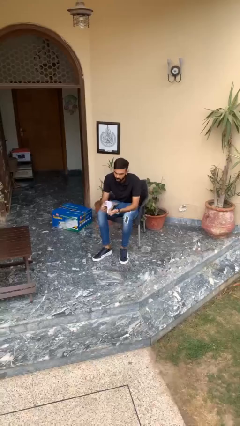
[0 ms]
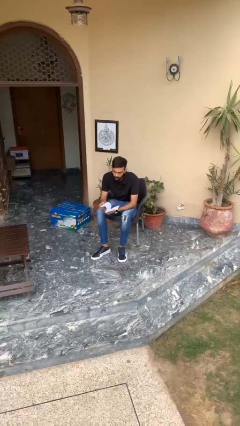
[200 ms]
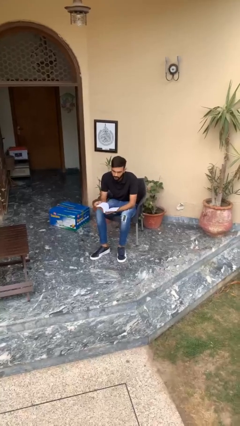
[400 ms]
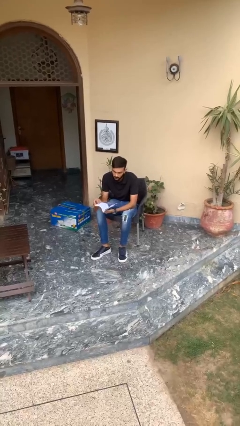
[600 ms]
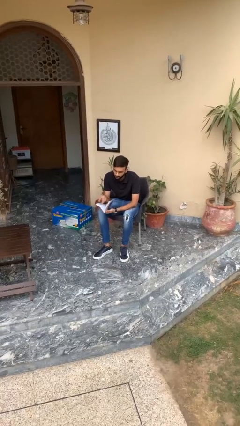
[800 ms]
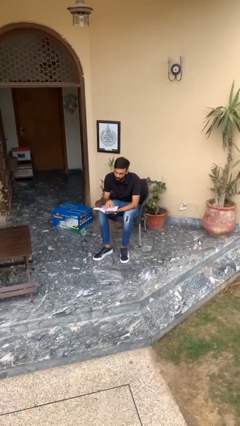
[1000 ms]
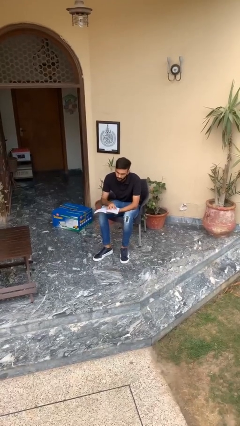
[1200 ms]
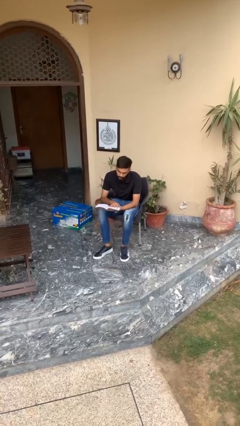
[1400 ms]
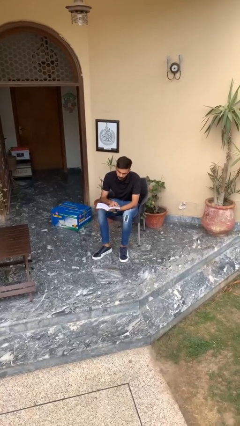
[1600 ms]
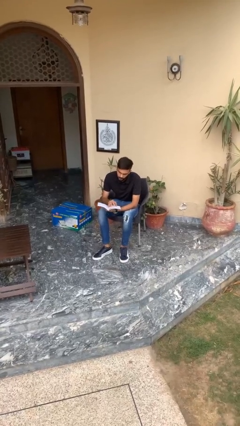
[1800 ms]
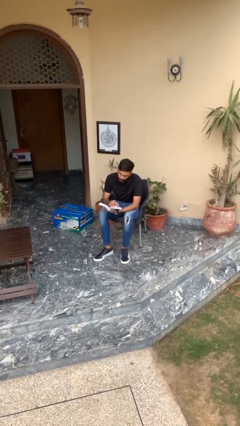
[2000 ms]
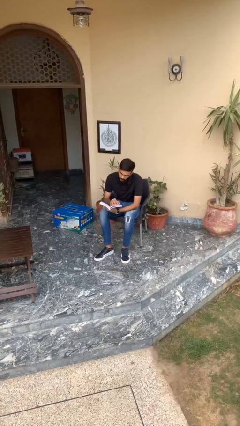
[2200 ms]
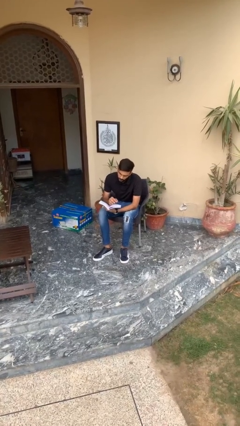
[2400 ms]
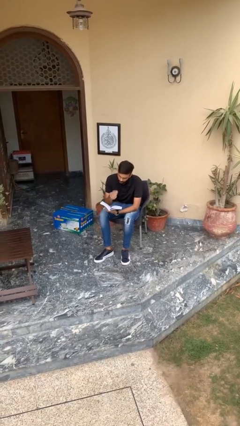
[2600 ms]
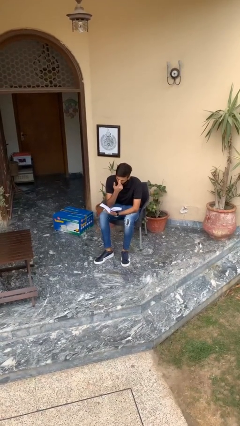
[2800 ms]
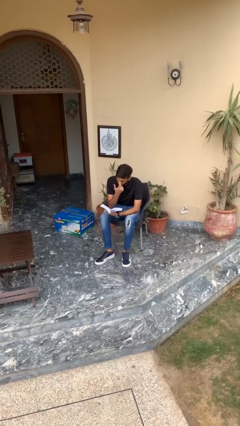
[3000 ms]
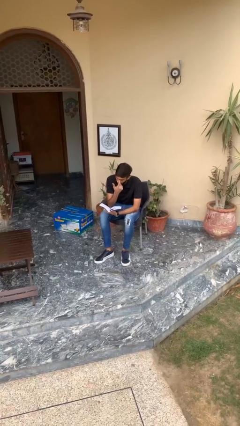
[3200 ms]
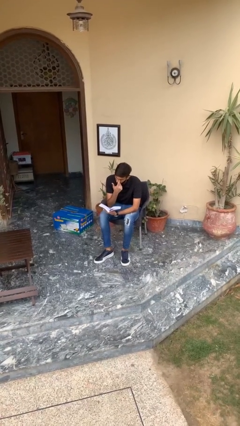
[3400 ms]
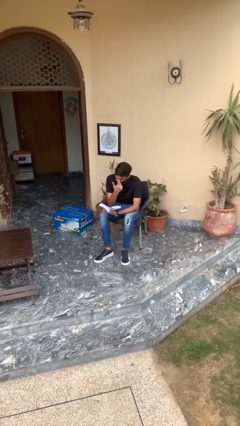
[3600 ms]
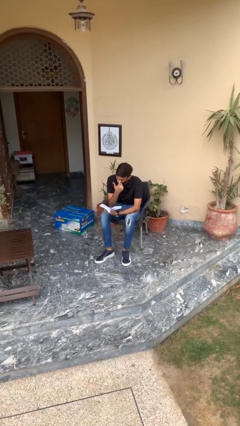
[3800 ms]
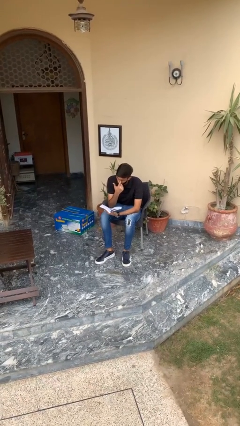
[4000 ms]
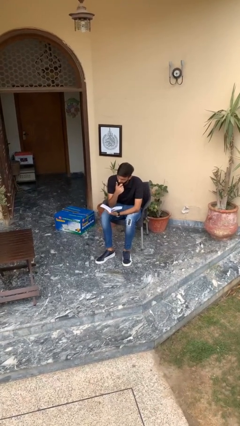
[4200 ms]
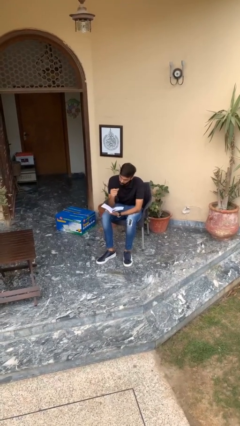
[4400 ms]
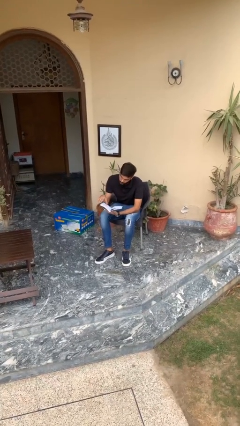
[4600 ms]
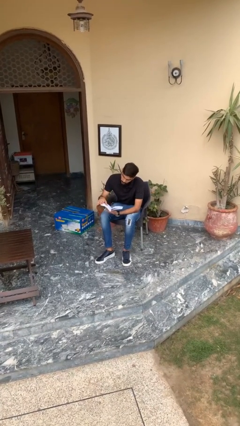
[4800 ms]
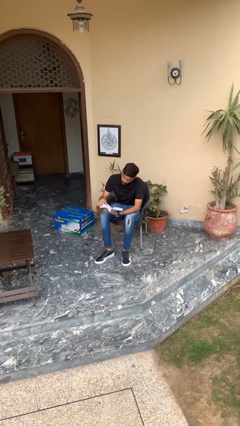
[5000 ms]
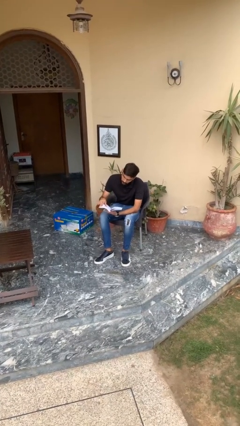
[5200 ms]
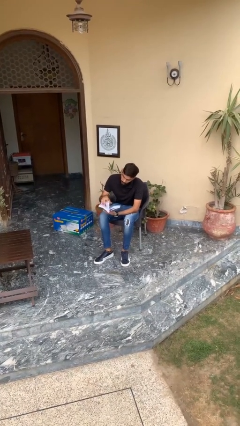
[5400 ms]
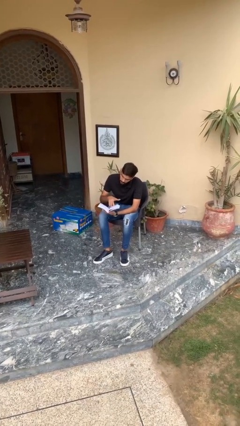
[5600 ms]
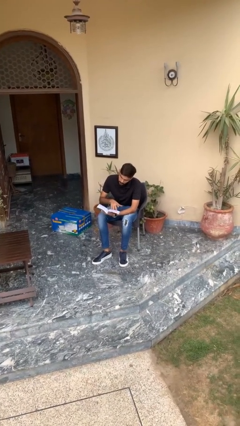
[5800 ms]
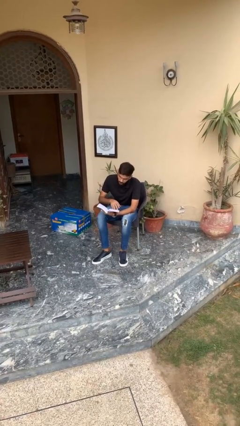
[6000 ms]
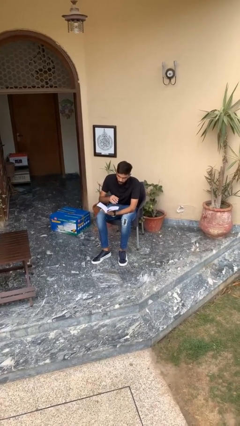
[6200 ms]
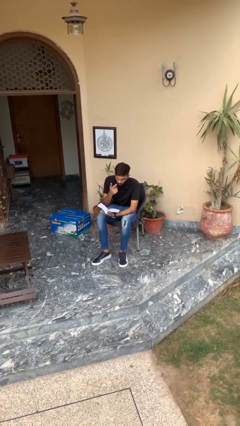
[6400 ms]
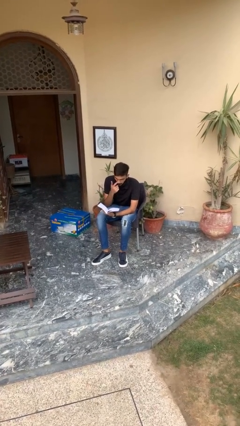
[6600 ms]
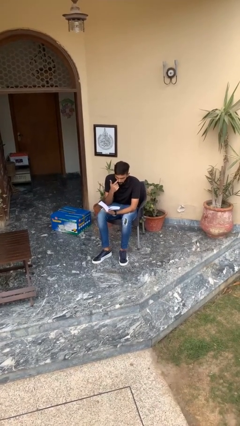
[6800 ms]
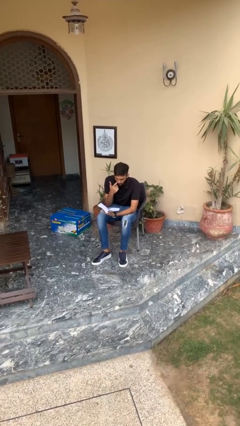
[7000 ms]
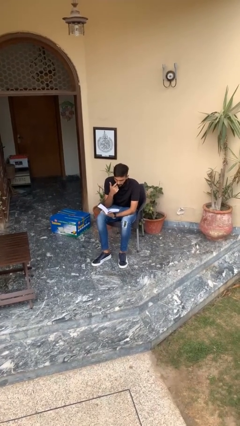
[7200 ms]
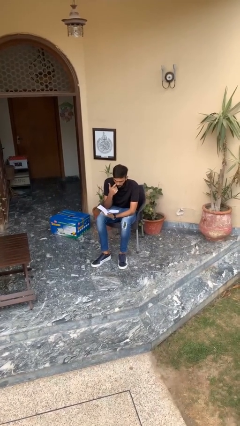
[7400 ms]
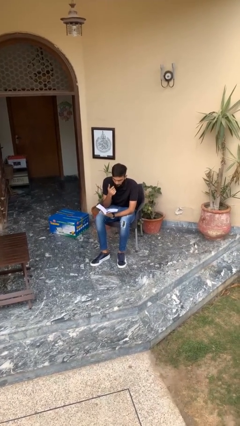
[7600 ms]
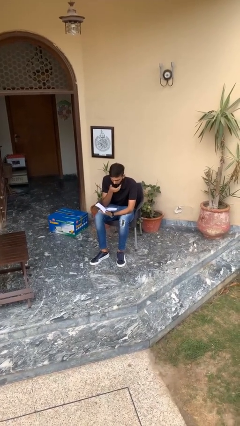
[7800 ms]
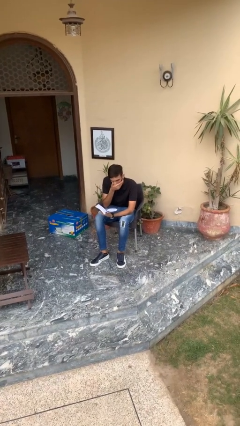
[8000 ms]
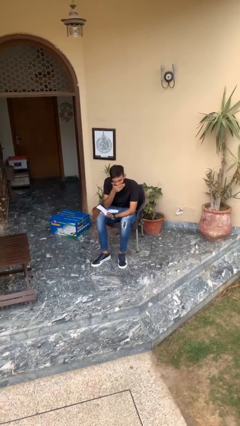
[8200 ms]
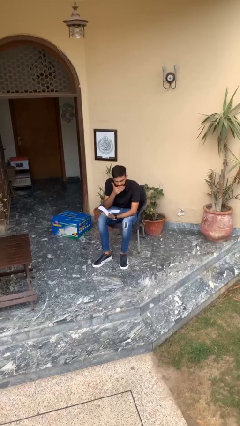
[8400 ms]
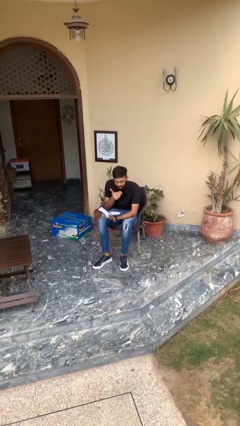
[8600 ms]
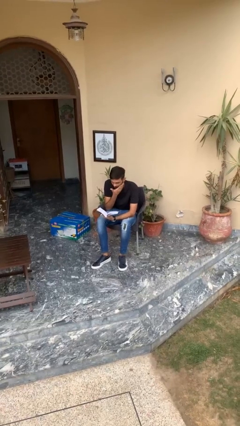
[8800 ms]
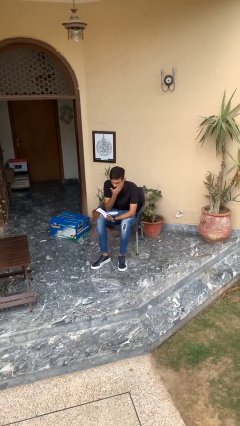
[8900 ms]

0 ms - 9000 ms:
person reads document

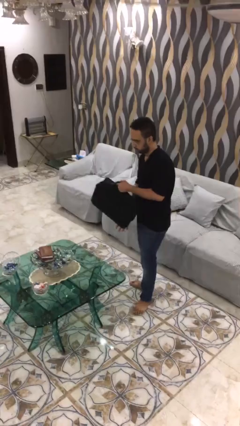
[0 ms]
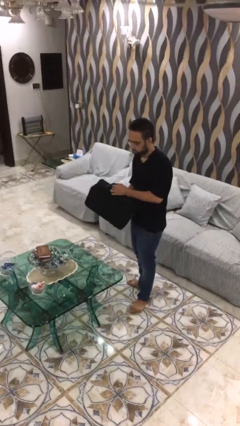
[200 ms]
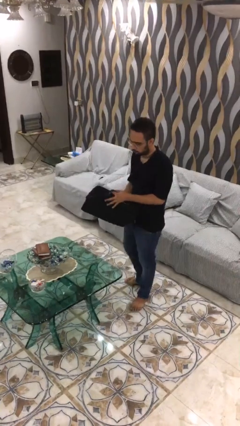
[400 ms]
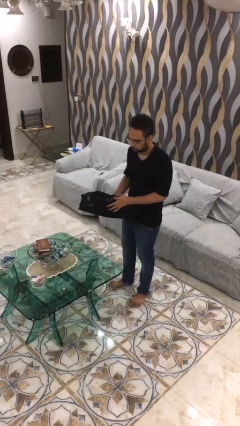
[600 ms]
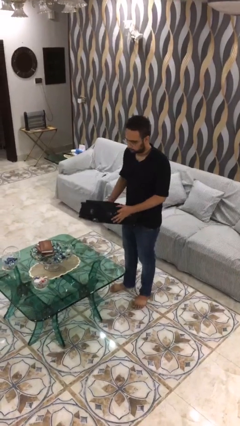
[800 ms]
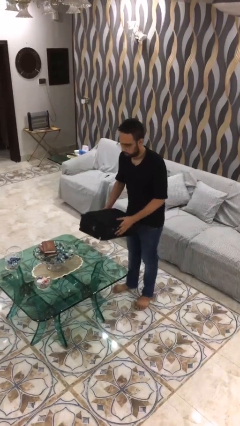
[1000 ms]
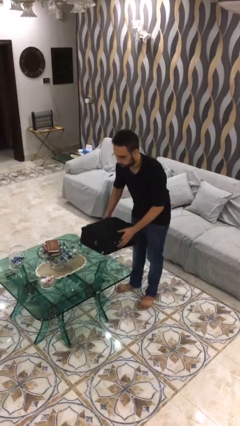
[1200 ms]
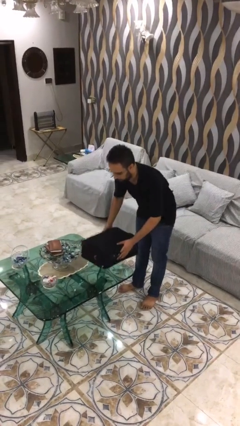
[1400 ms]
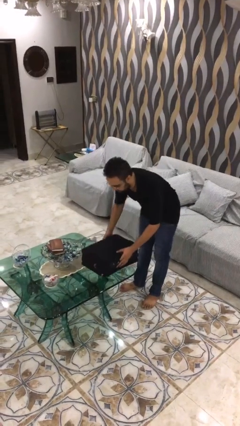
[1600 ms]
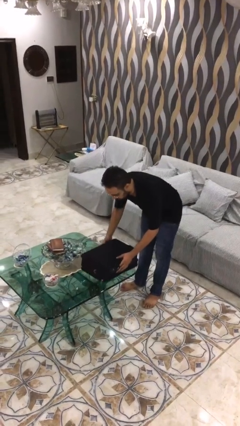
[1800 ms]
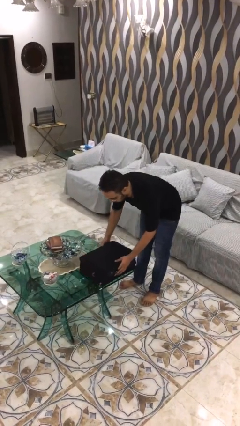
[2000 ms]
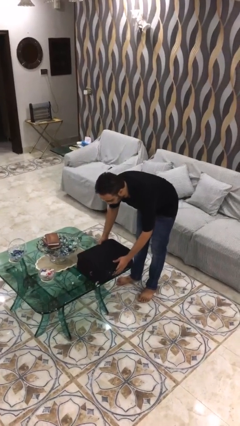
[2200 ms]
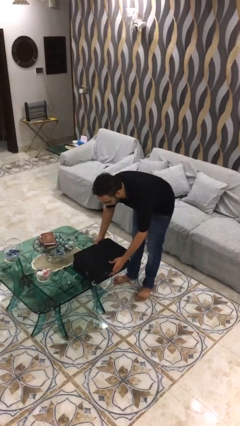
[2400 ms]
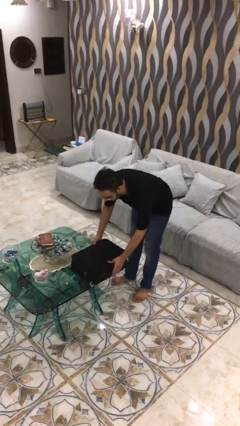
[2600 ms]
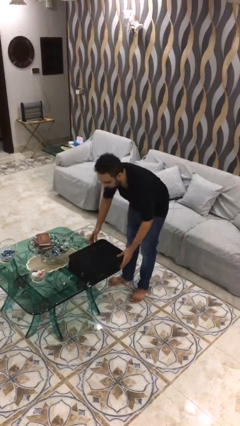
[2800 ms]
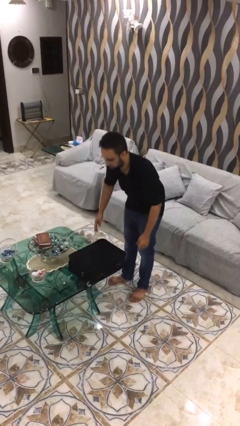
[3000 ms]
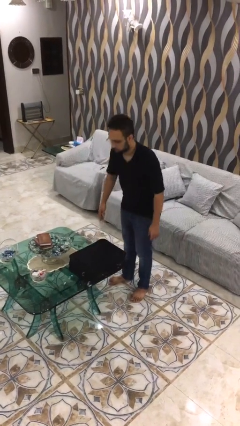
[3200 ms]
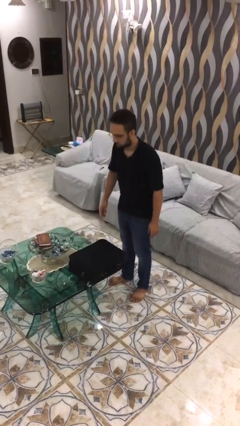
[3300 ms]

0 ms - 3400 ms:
person puts down object on table

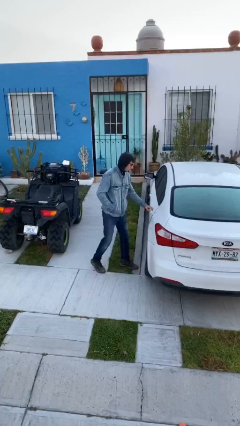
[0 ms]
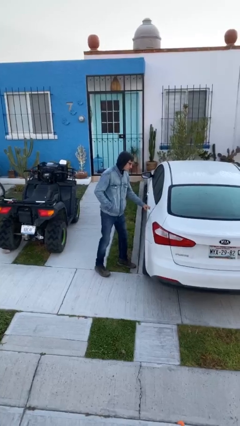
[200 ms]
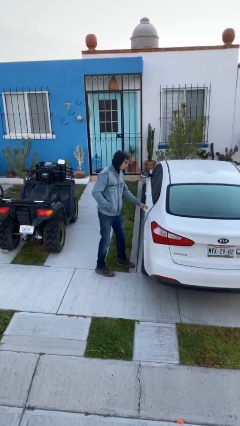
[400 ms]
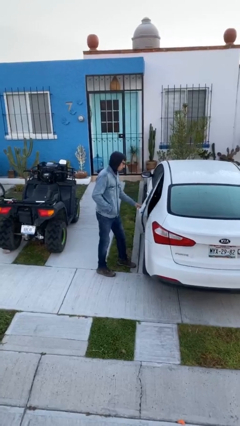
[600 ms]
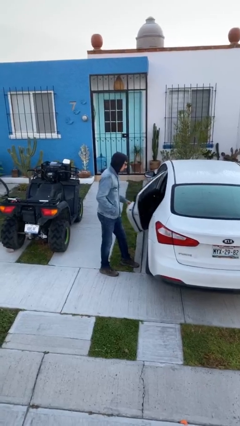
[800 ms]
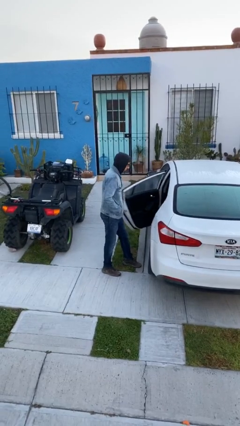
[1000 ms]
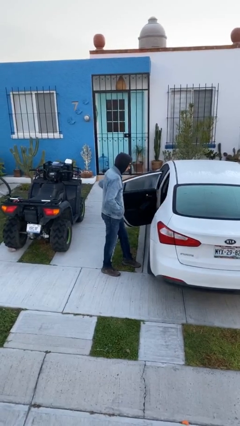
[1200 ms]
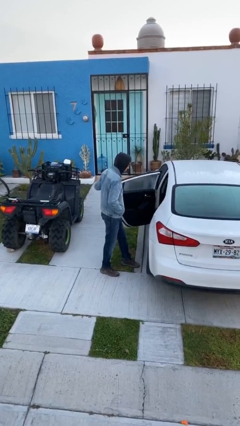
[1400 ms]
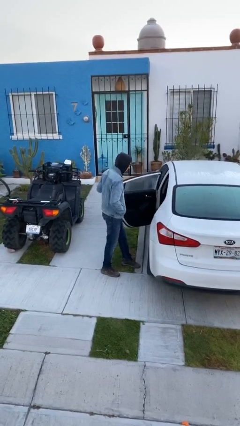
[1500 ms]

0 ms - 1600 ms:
person opens car door

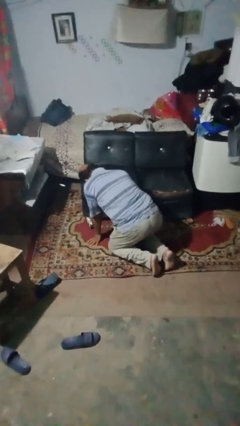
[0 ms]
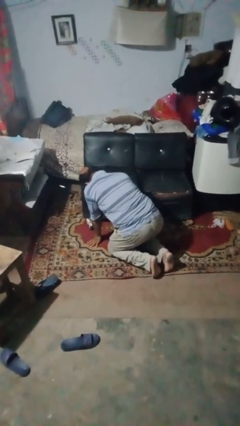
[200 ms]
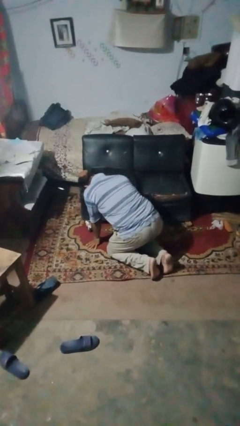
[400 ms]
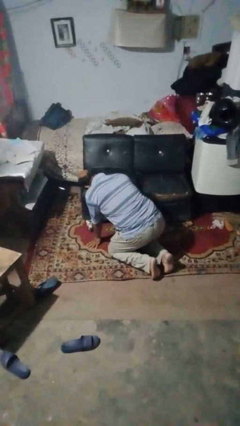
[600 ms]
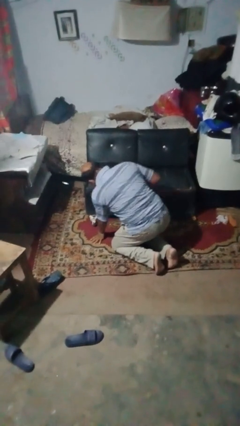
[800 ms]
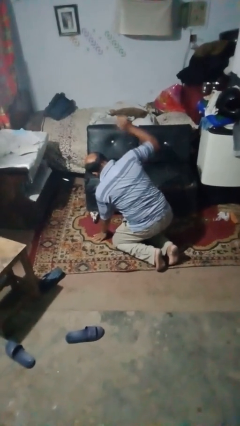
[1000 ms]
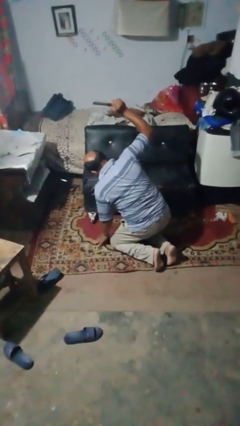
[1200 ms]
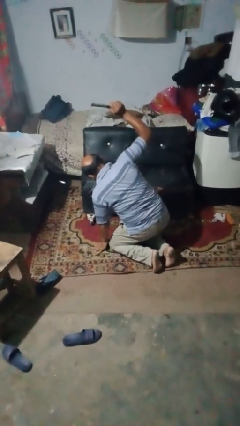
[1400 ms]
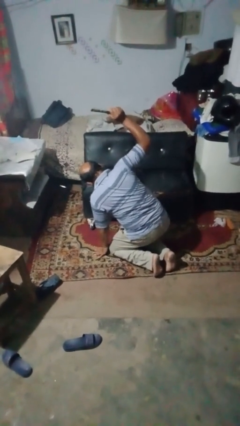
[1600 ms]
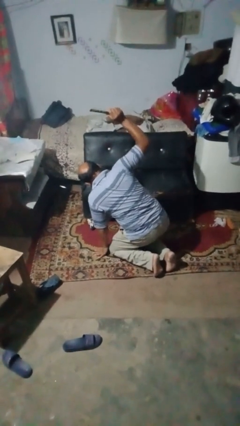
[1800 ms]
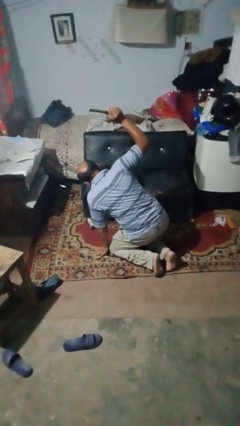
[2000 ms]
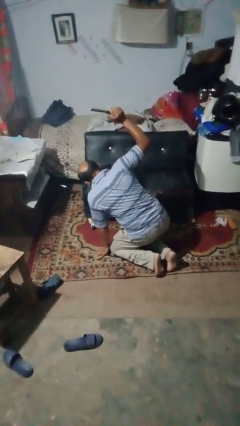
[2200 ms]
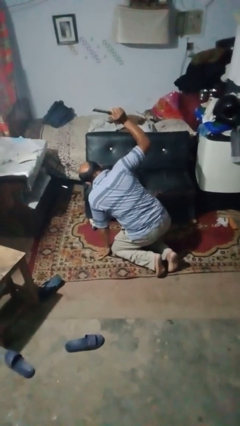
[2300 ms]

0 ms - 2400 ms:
person searches under couch

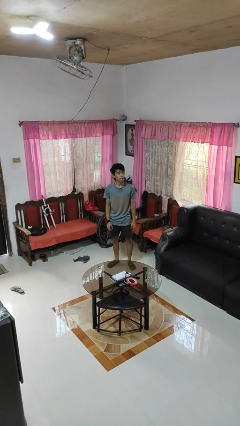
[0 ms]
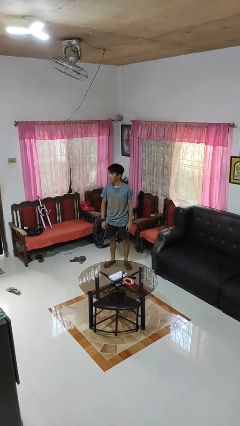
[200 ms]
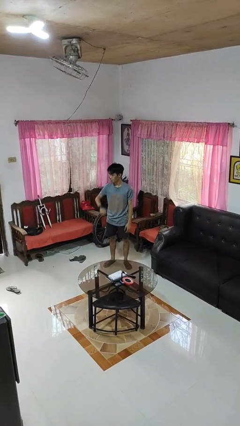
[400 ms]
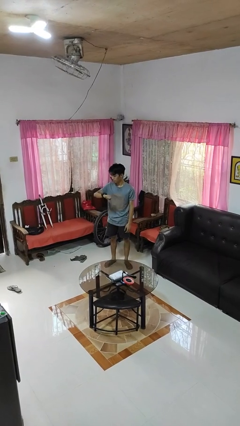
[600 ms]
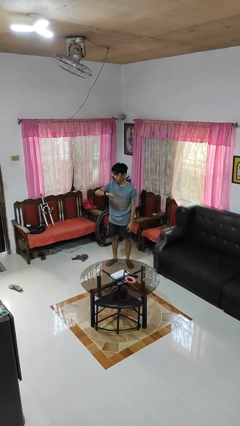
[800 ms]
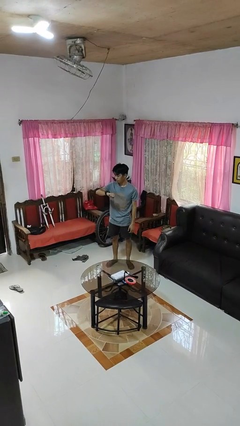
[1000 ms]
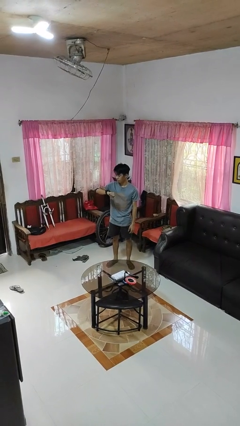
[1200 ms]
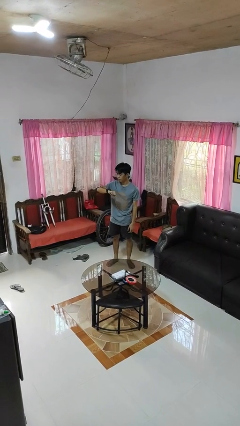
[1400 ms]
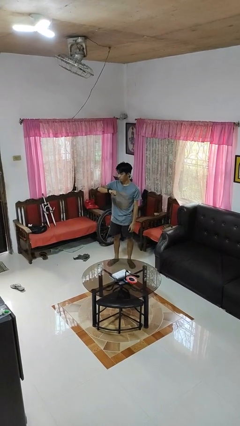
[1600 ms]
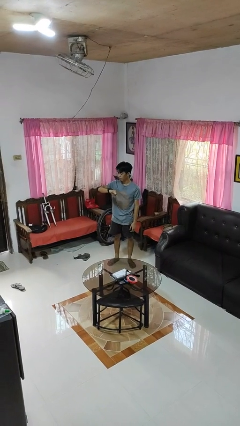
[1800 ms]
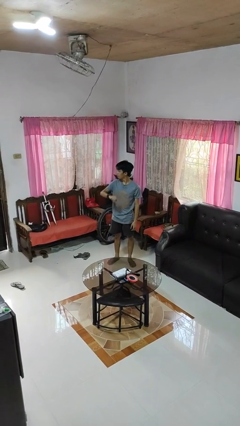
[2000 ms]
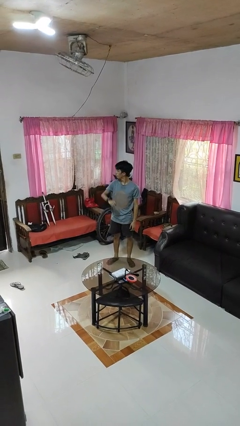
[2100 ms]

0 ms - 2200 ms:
person looks at wristwatch
